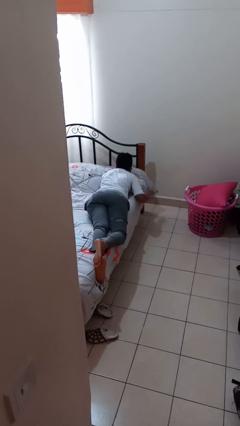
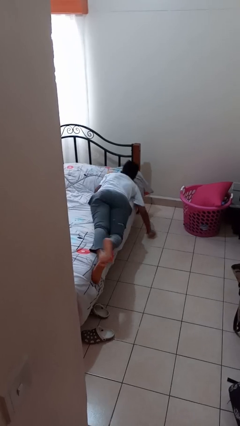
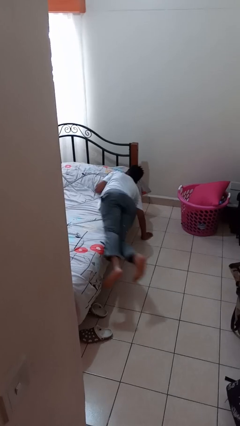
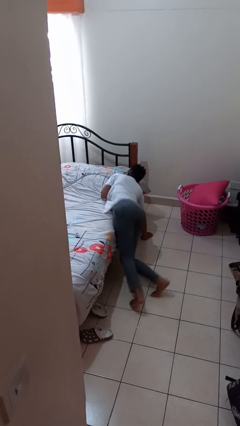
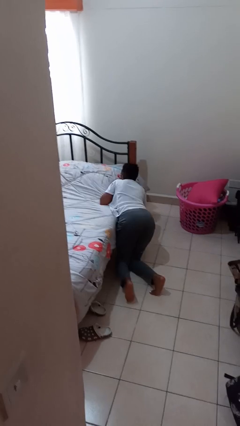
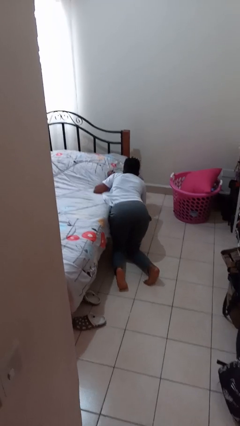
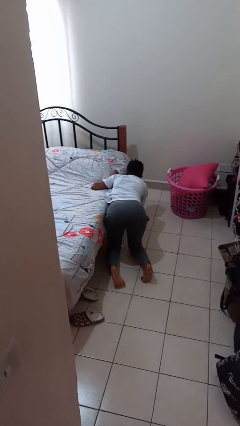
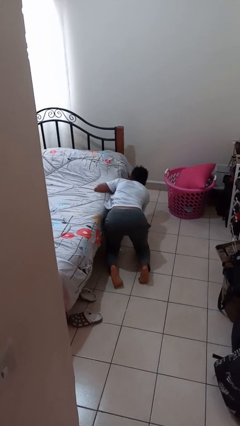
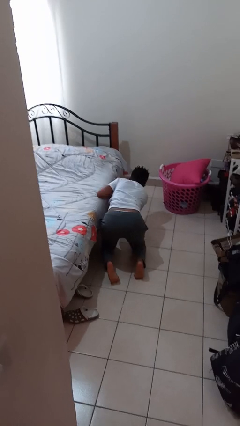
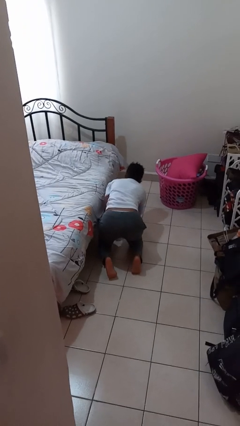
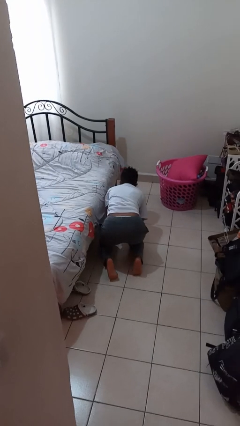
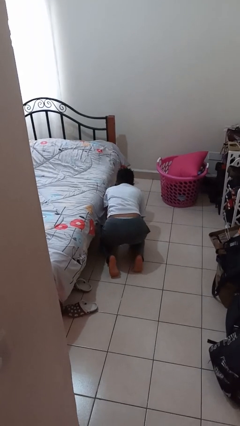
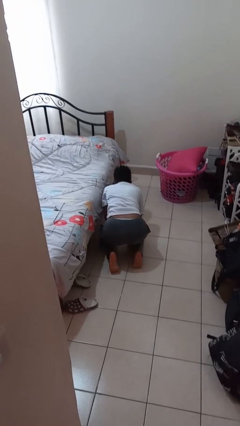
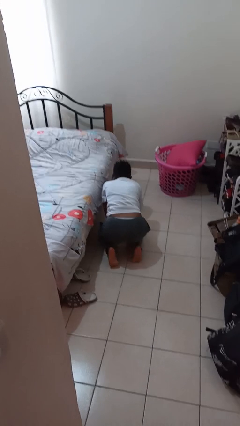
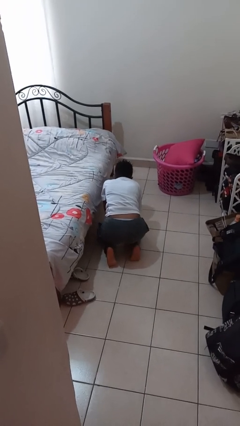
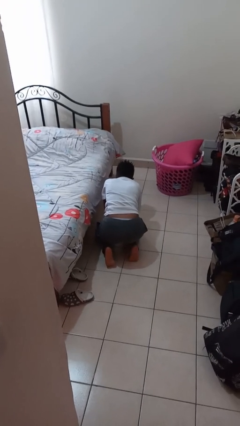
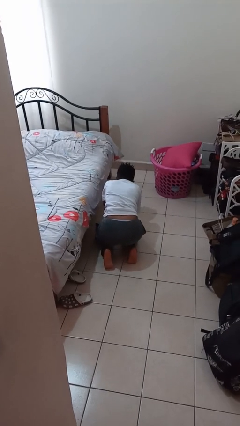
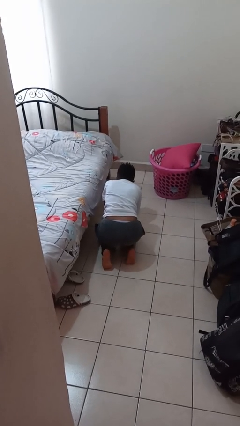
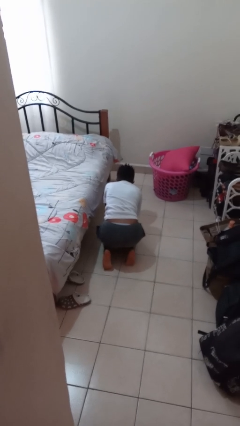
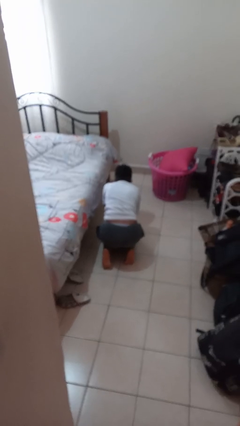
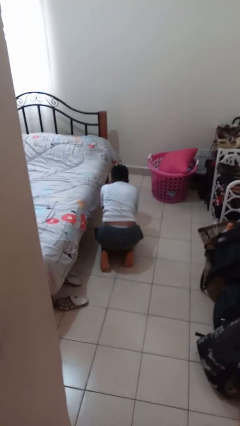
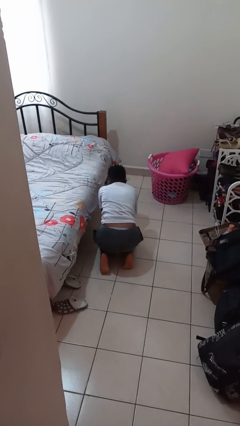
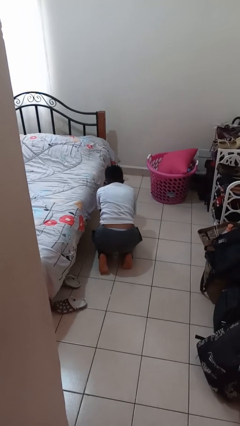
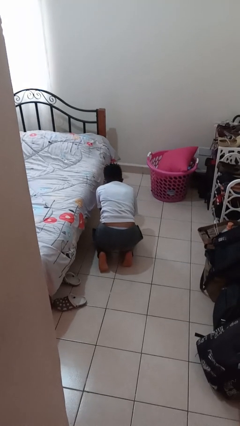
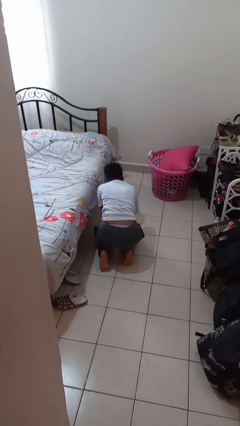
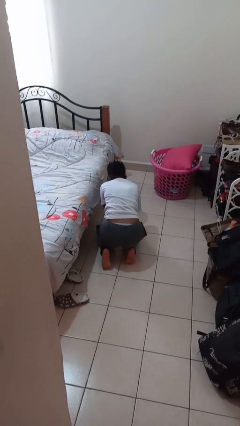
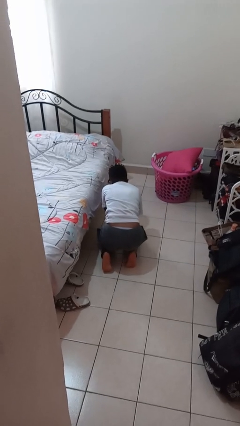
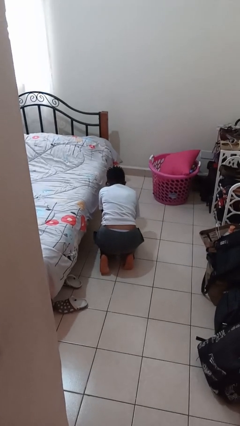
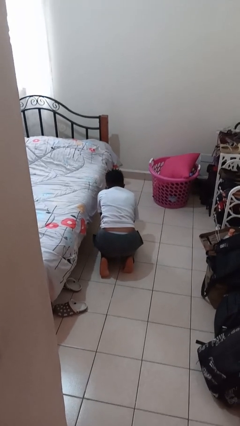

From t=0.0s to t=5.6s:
person falls from bed

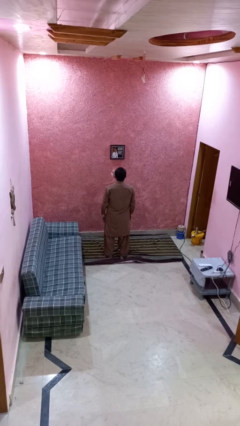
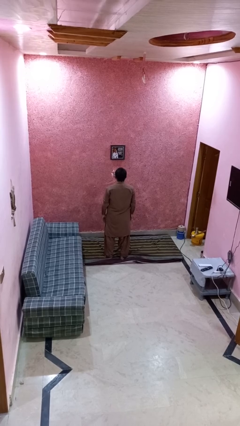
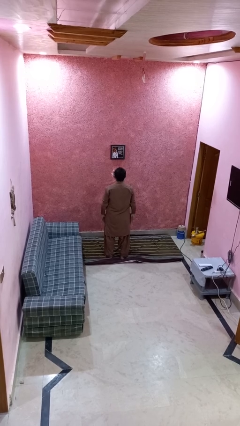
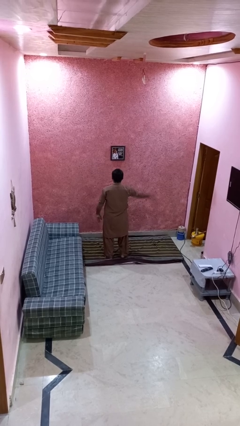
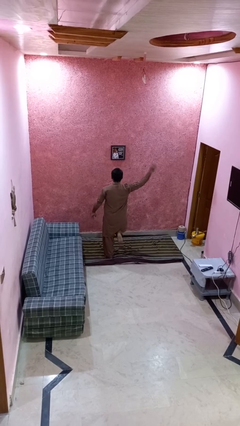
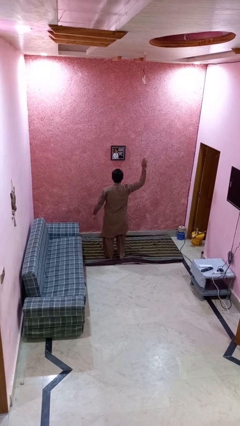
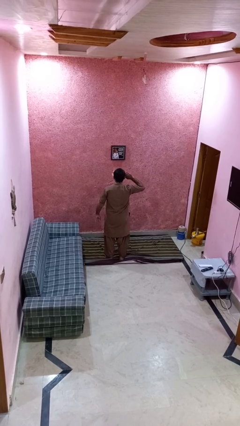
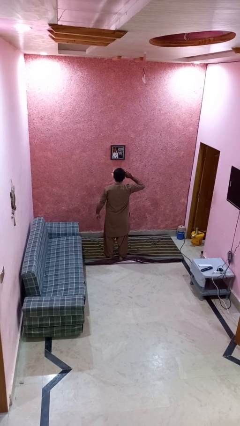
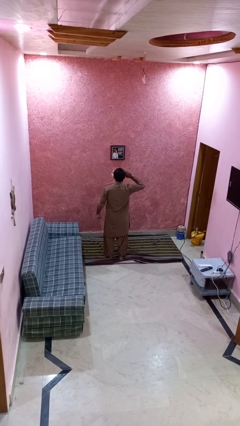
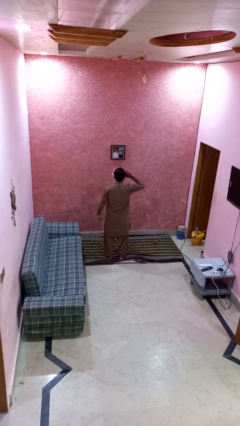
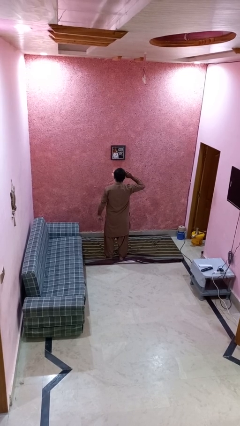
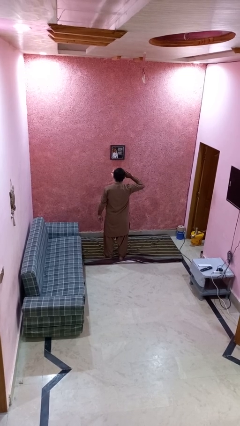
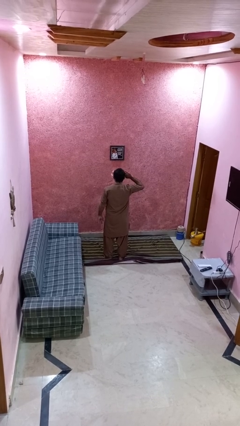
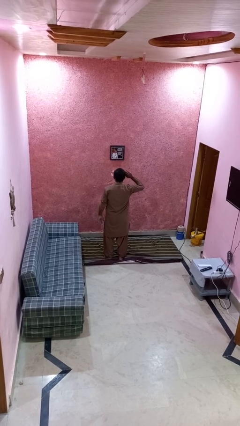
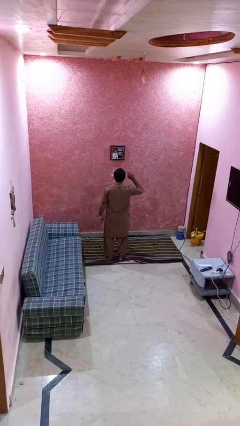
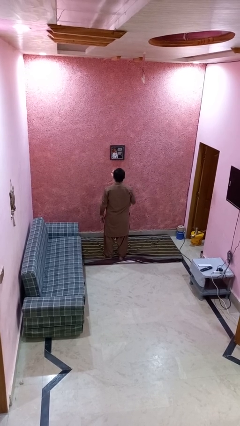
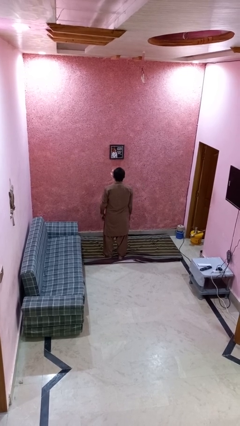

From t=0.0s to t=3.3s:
person salutes

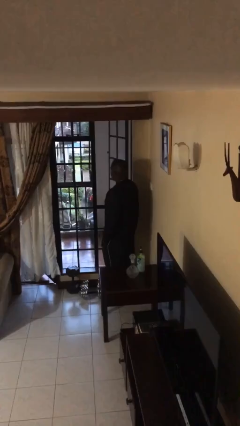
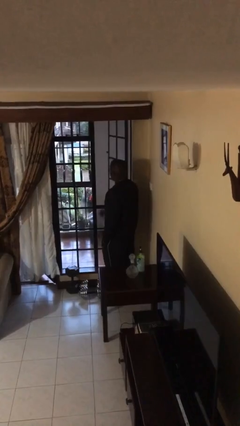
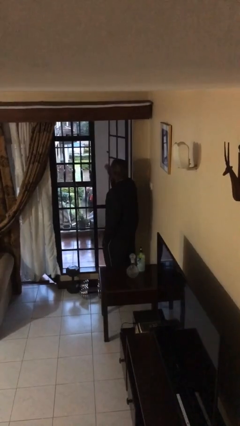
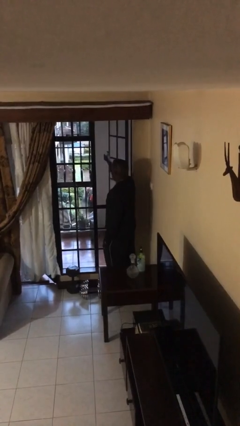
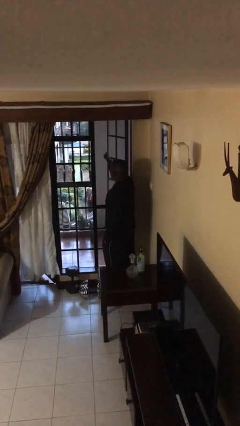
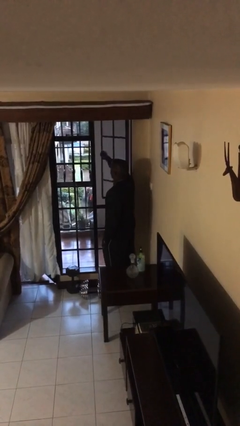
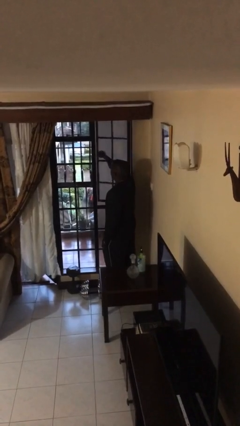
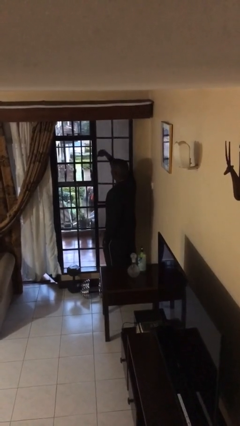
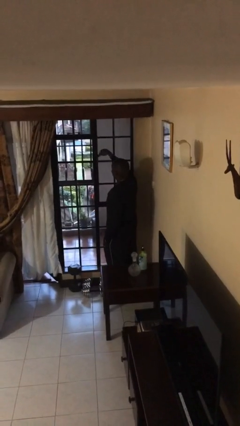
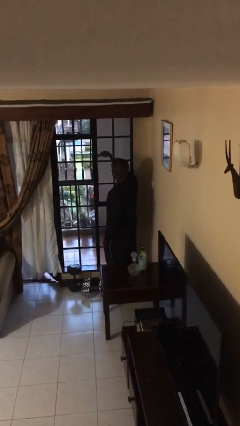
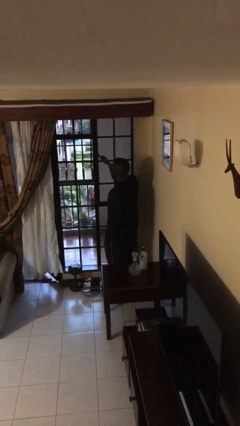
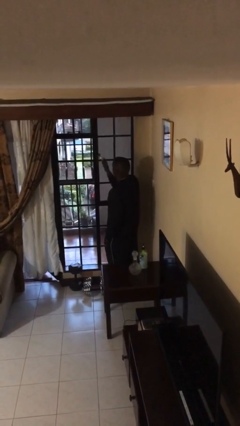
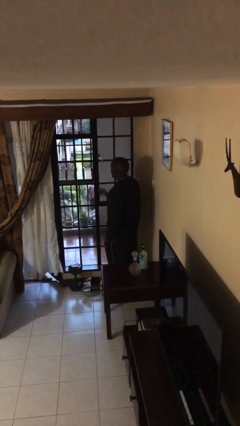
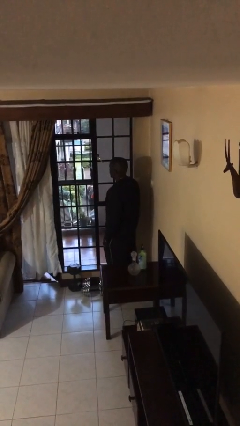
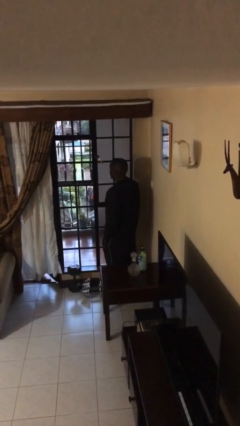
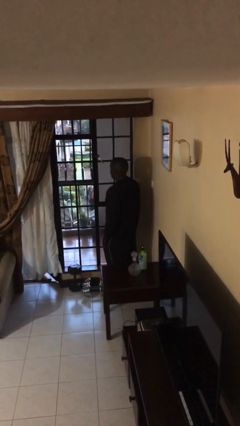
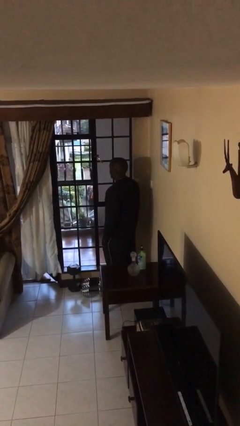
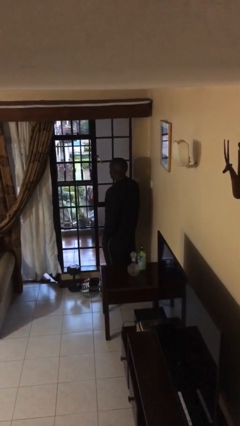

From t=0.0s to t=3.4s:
person closes home window

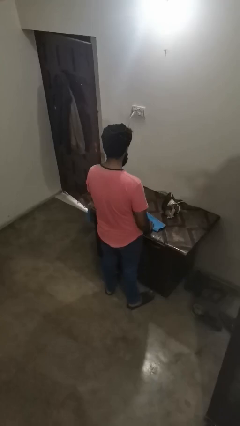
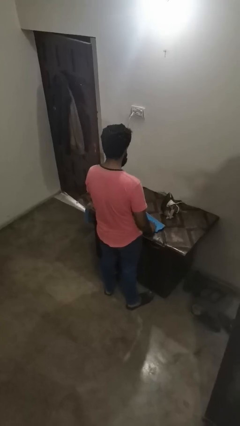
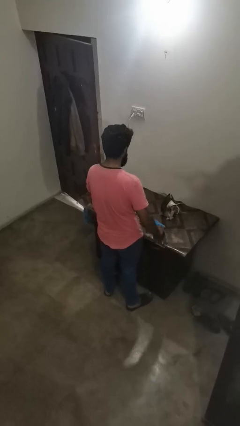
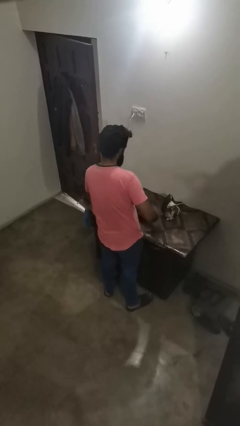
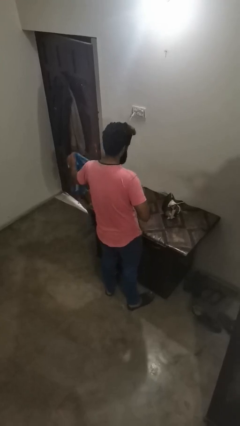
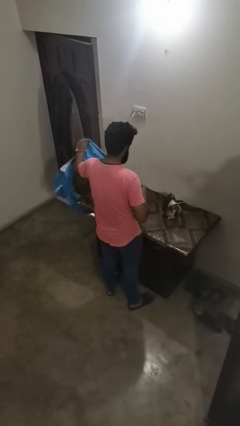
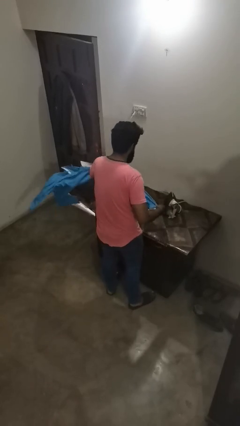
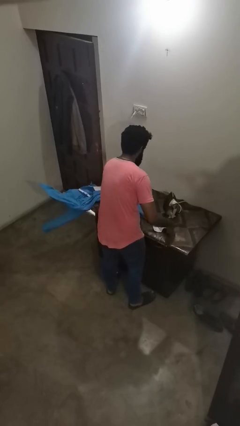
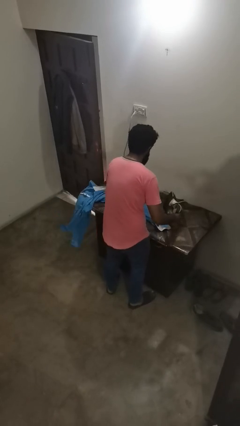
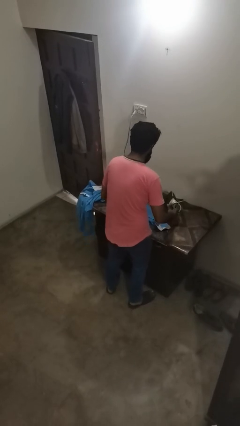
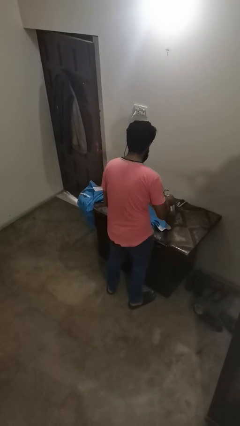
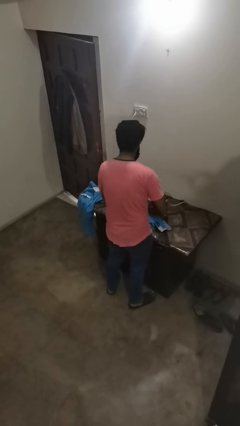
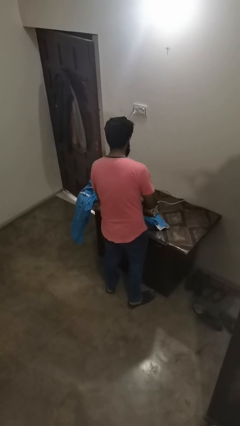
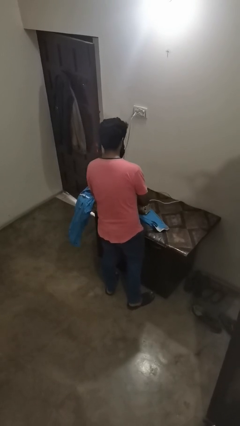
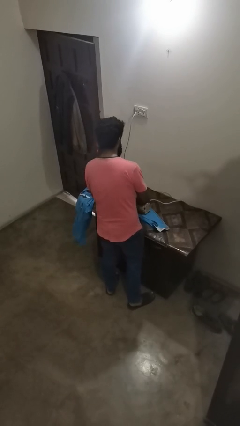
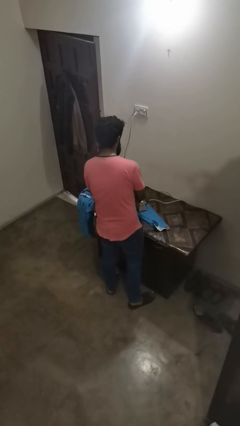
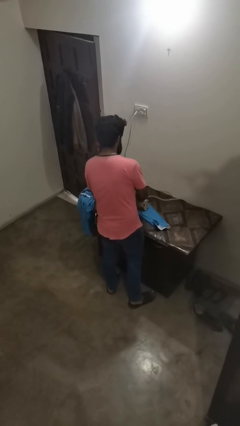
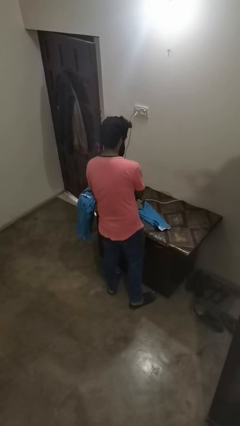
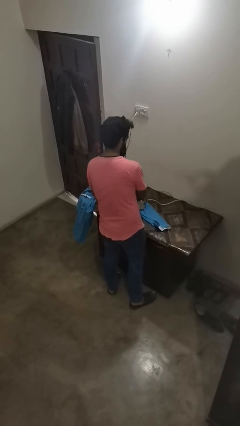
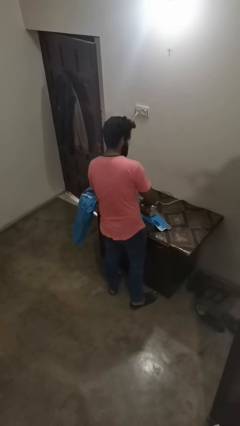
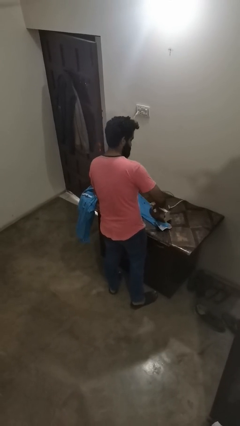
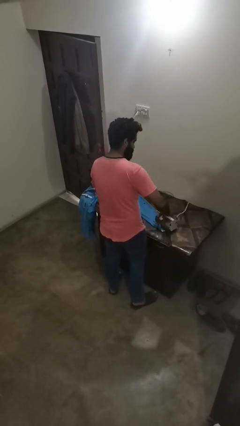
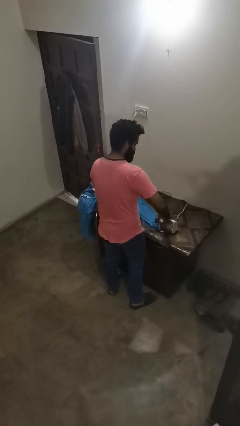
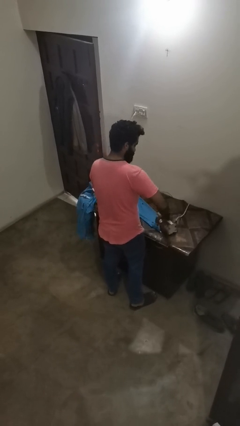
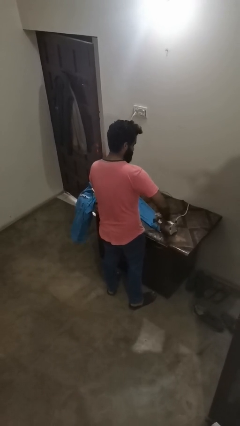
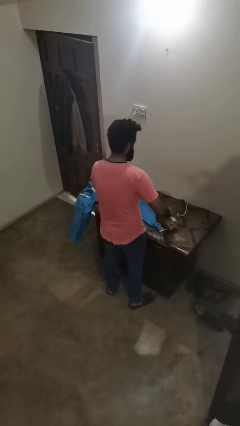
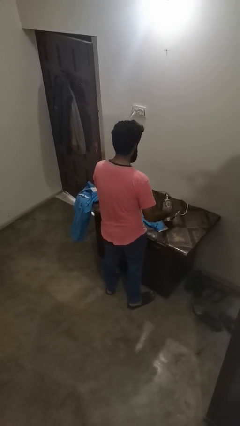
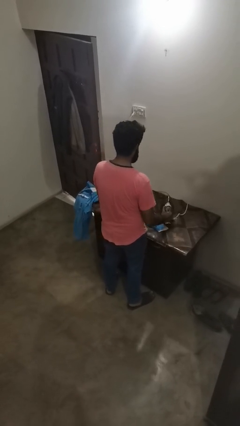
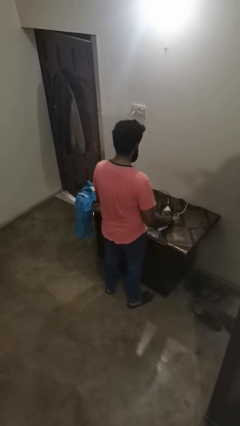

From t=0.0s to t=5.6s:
person irons clothes
